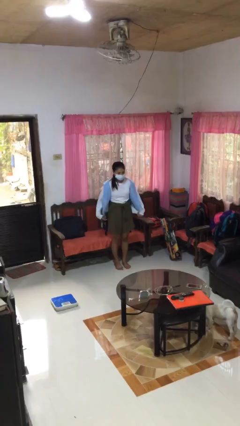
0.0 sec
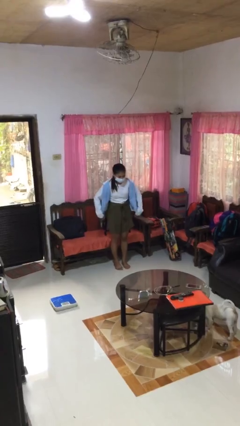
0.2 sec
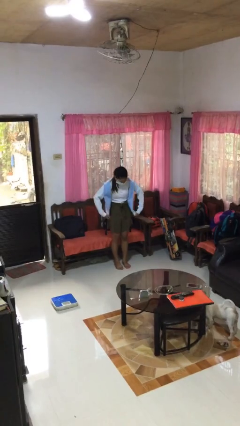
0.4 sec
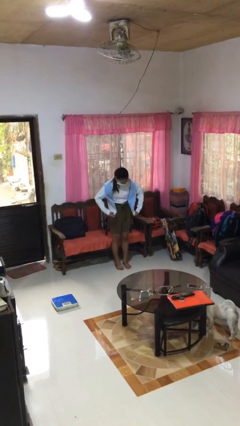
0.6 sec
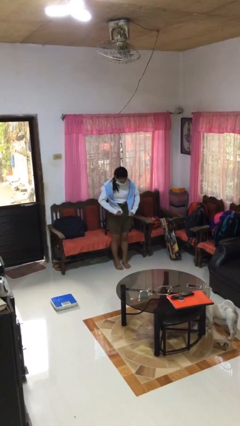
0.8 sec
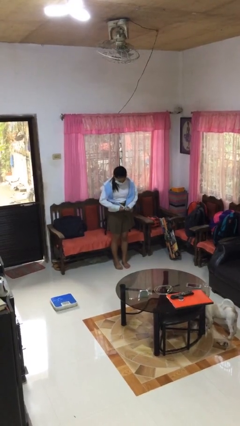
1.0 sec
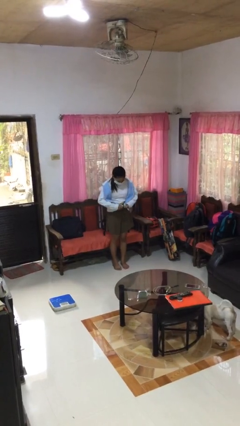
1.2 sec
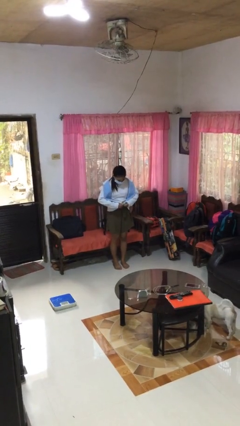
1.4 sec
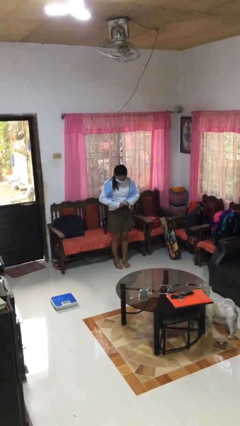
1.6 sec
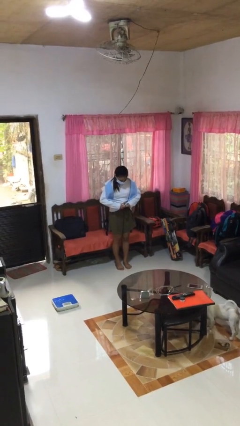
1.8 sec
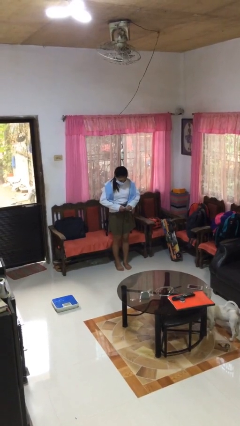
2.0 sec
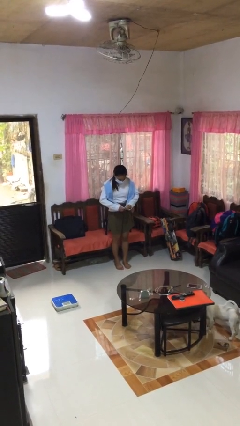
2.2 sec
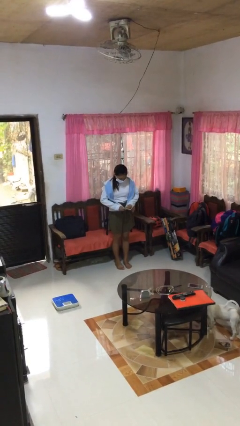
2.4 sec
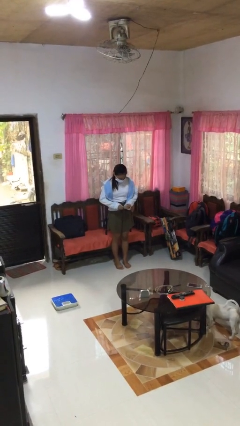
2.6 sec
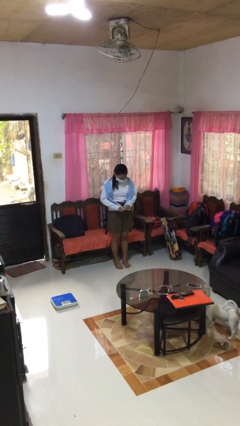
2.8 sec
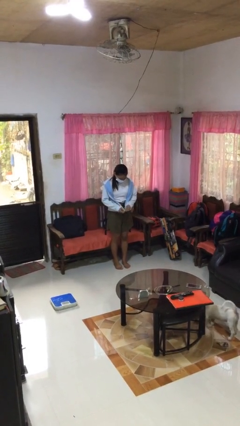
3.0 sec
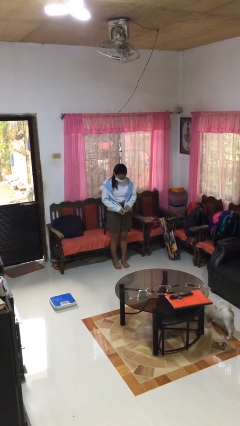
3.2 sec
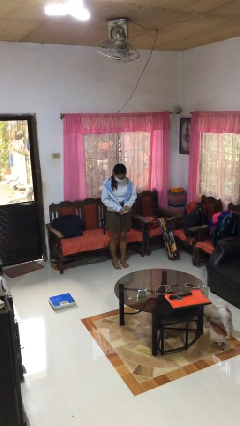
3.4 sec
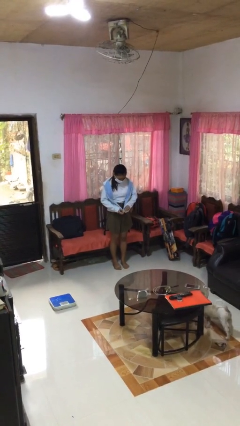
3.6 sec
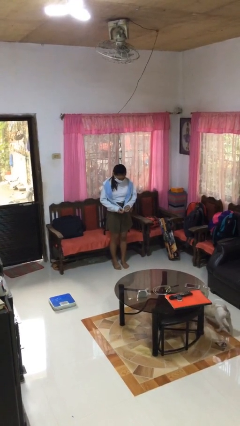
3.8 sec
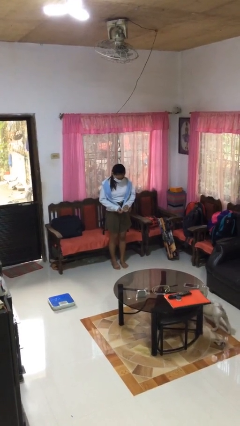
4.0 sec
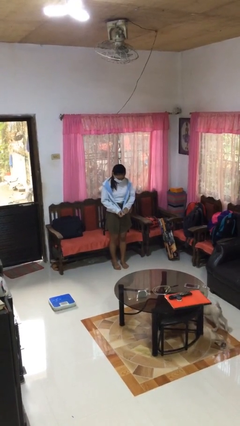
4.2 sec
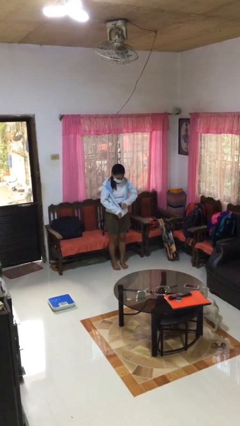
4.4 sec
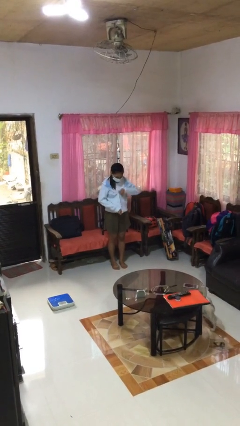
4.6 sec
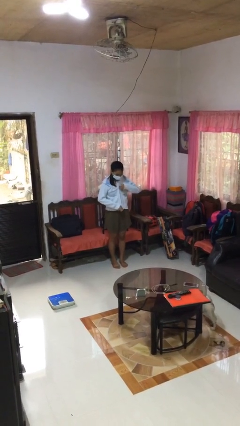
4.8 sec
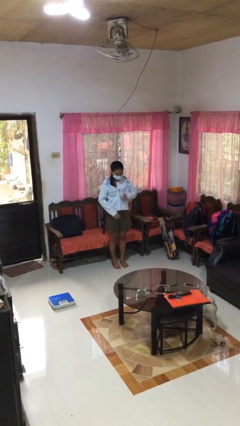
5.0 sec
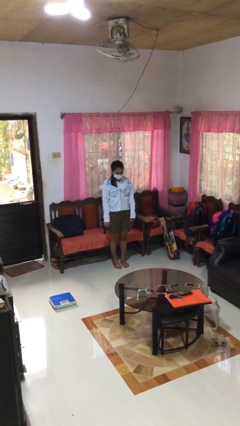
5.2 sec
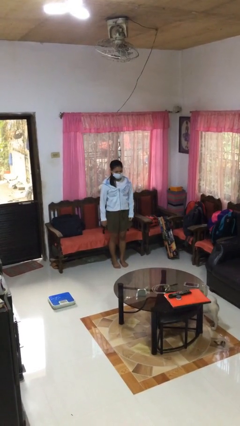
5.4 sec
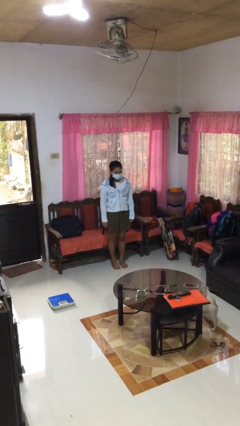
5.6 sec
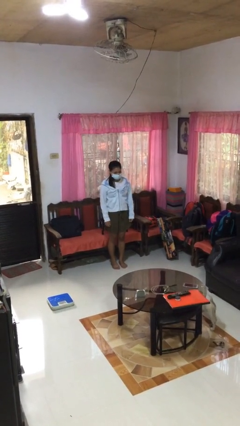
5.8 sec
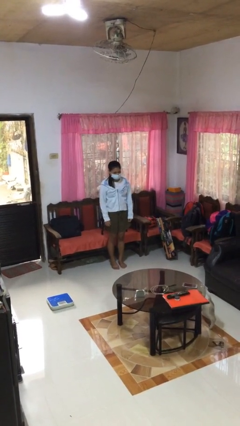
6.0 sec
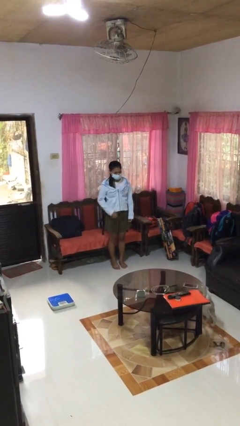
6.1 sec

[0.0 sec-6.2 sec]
person zips up jacket

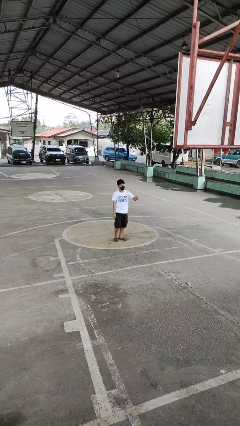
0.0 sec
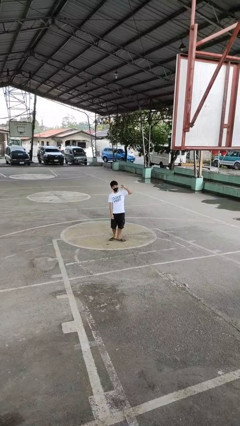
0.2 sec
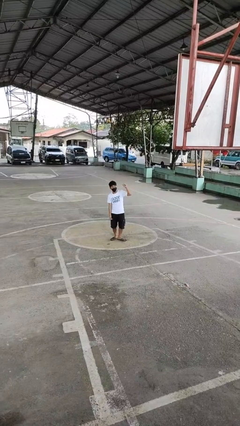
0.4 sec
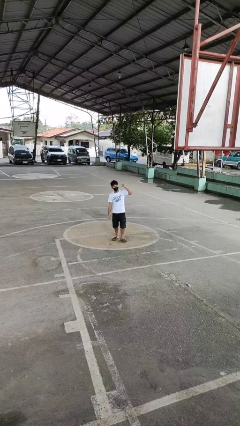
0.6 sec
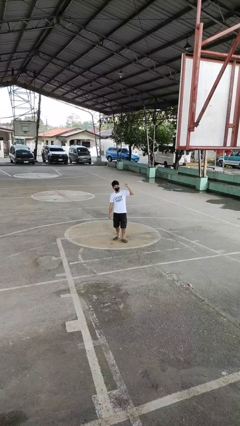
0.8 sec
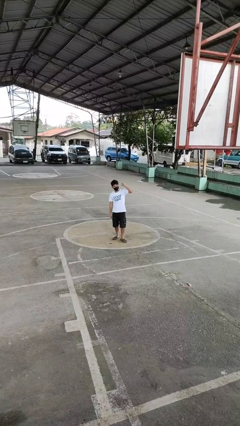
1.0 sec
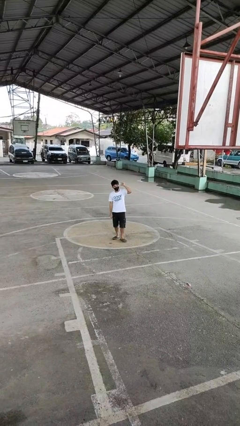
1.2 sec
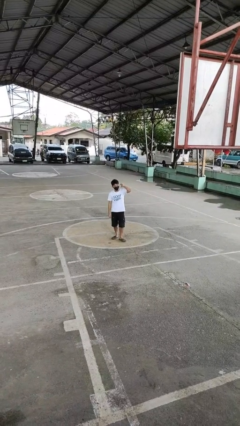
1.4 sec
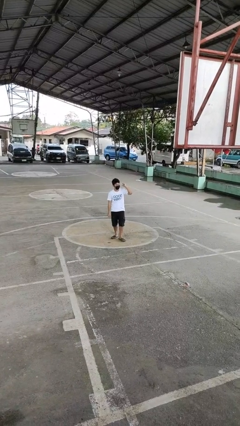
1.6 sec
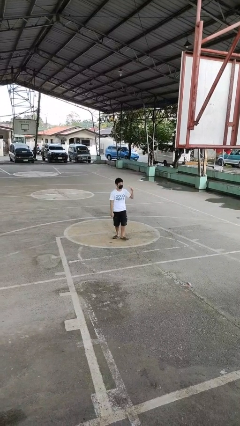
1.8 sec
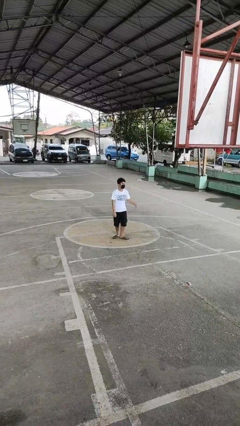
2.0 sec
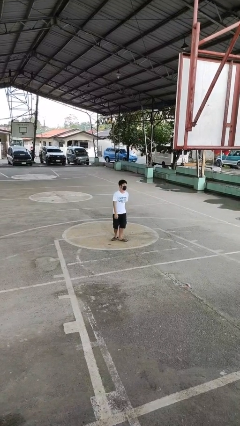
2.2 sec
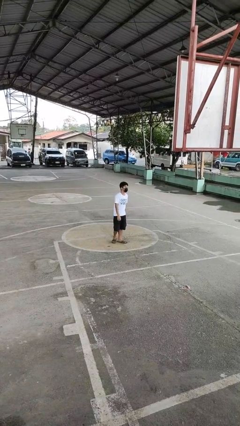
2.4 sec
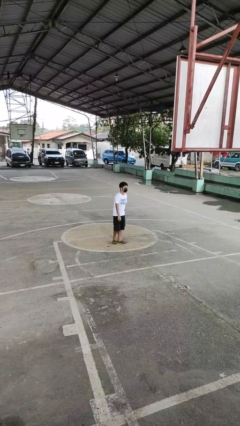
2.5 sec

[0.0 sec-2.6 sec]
person gestures behind me

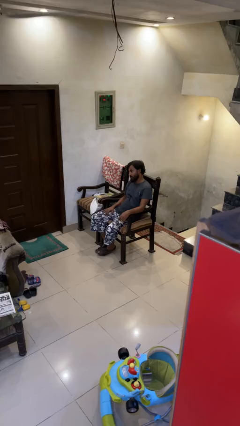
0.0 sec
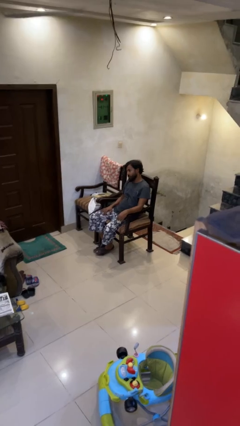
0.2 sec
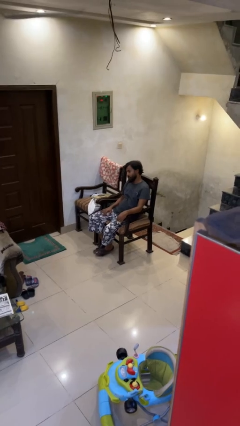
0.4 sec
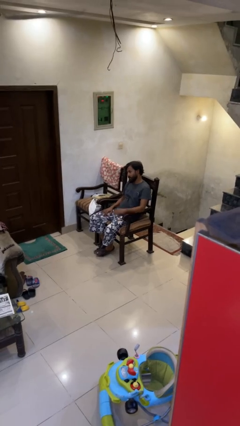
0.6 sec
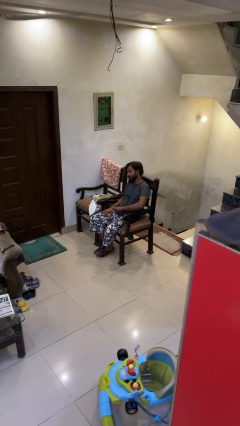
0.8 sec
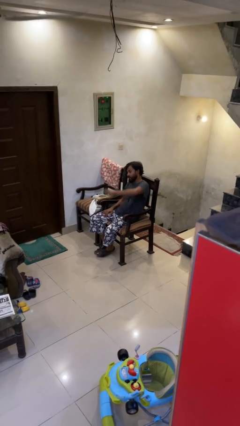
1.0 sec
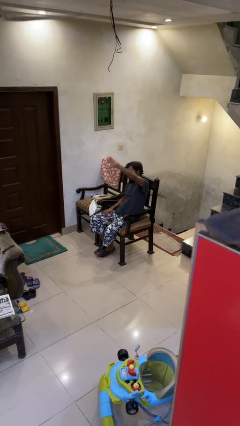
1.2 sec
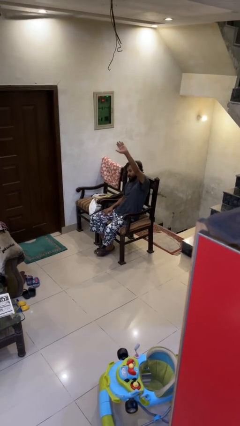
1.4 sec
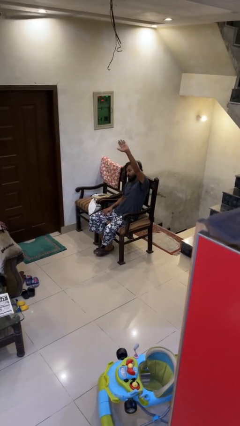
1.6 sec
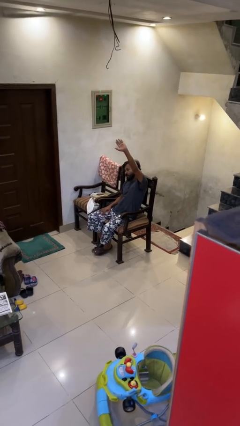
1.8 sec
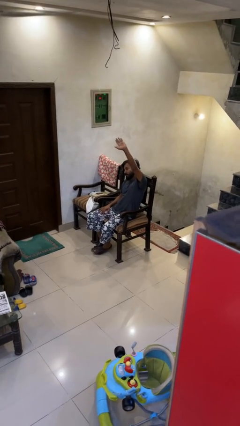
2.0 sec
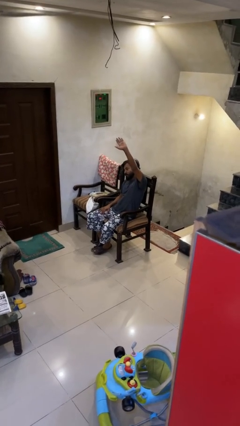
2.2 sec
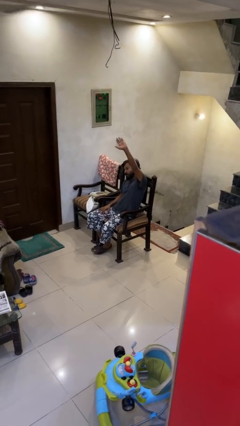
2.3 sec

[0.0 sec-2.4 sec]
person gestures swipe up

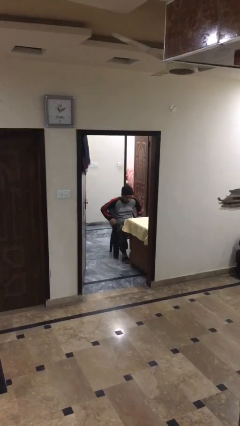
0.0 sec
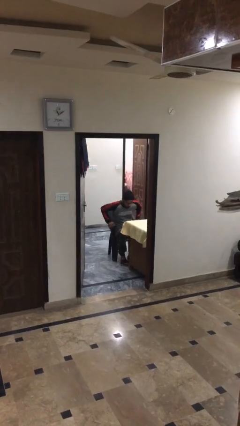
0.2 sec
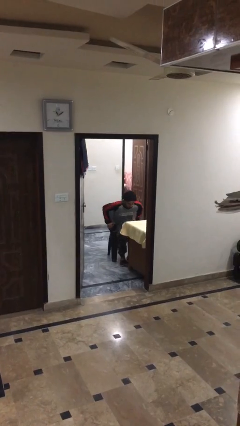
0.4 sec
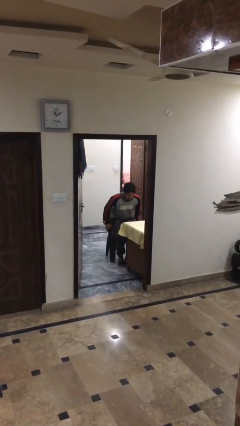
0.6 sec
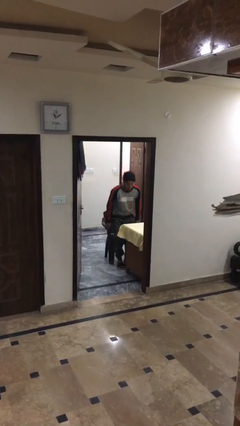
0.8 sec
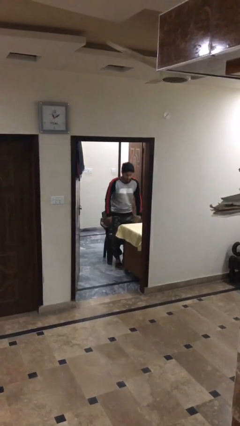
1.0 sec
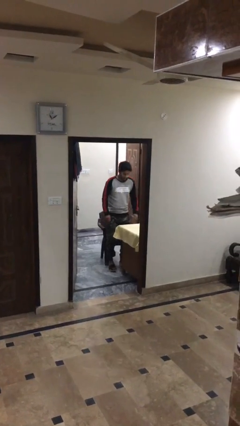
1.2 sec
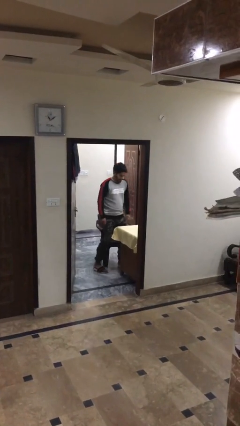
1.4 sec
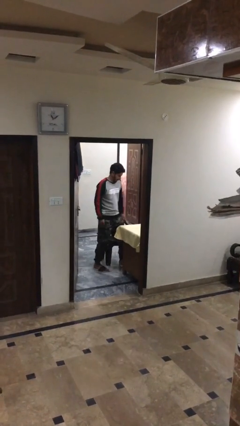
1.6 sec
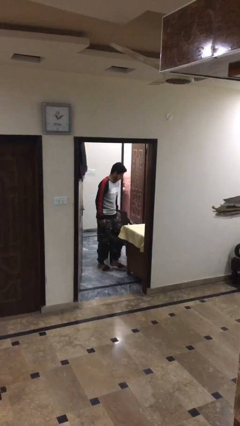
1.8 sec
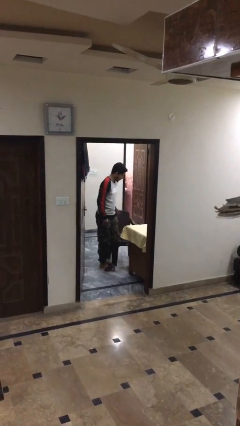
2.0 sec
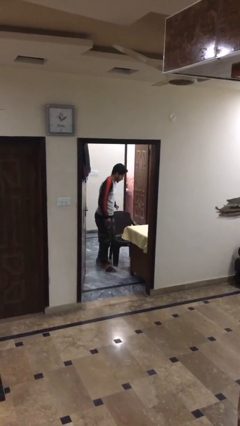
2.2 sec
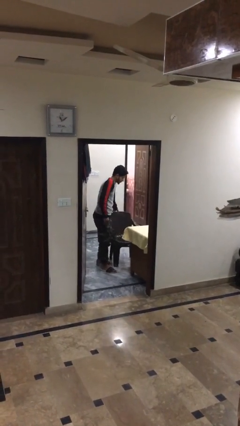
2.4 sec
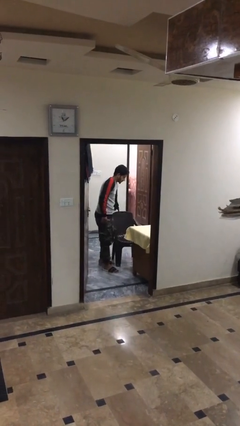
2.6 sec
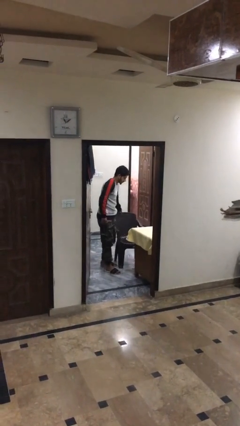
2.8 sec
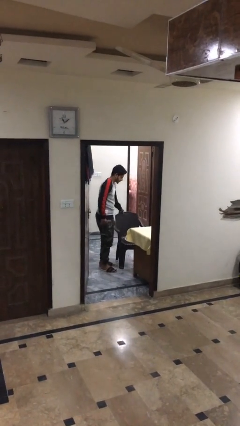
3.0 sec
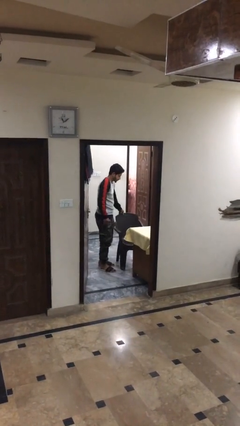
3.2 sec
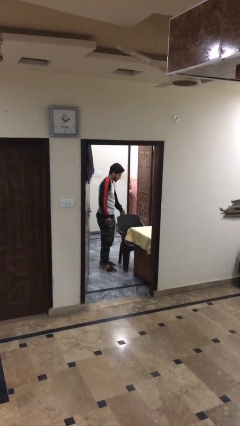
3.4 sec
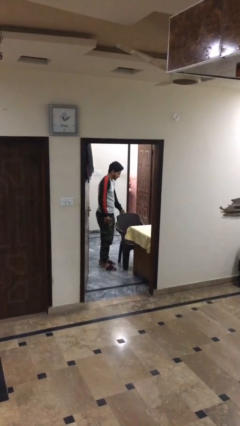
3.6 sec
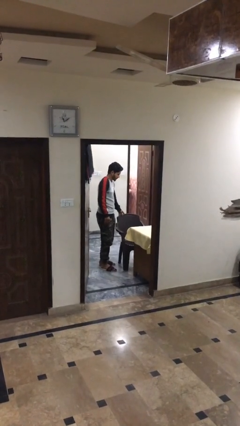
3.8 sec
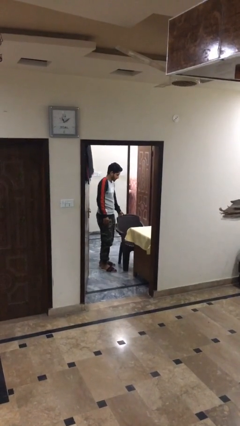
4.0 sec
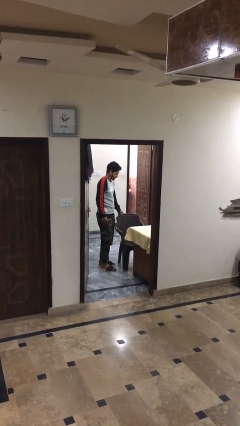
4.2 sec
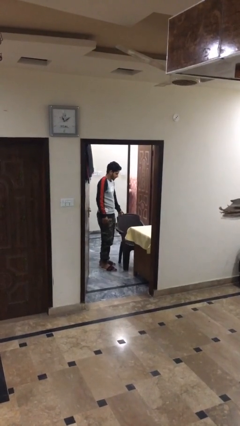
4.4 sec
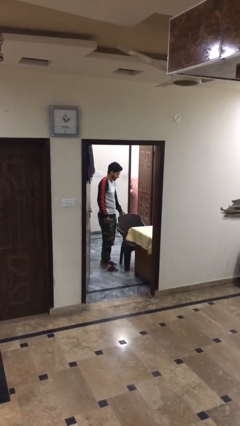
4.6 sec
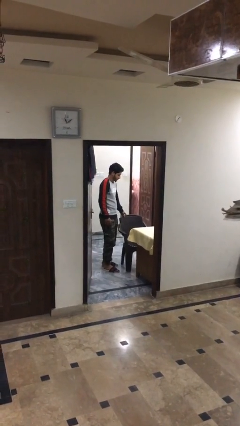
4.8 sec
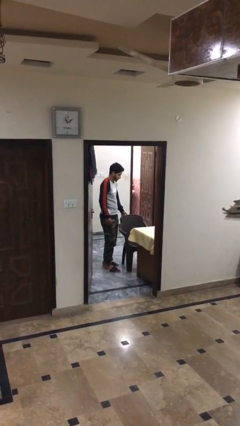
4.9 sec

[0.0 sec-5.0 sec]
person stands up

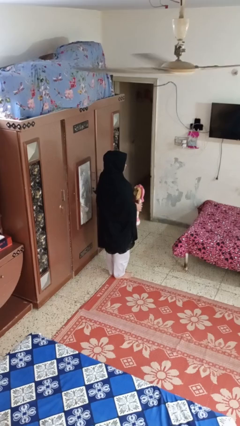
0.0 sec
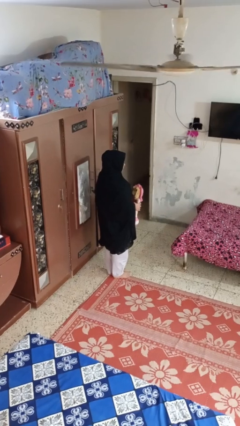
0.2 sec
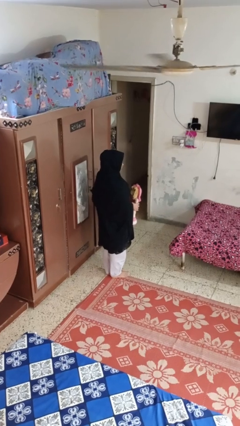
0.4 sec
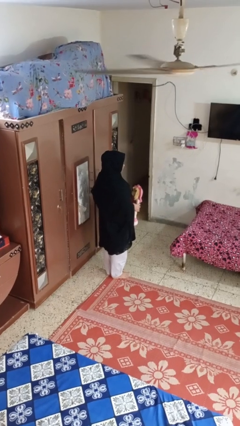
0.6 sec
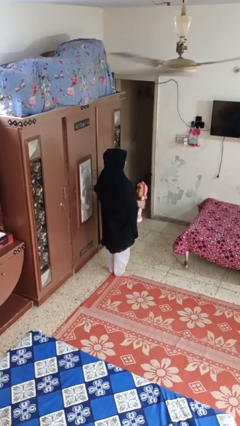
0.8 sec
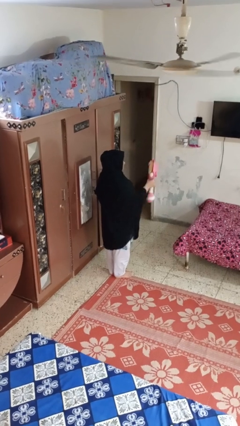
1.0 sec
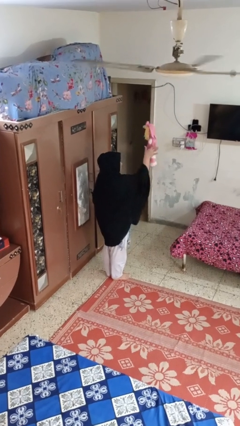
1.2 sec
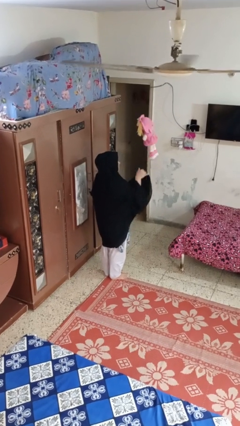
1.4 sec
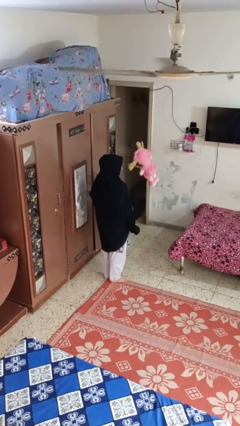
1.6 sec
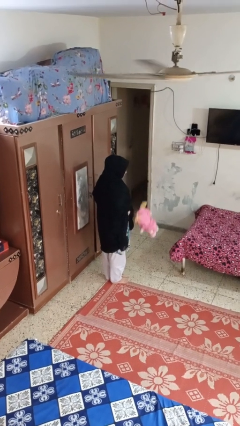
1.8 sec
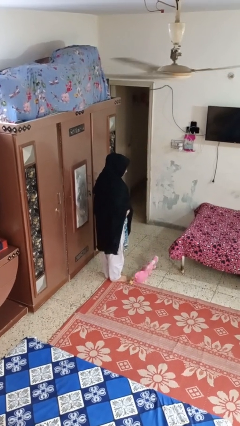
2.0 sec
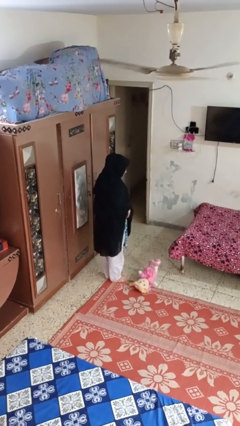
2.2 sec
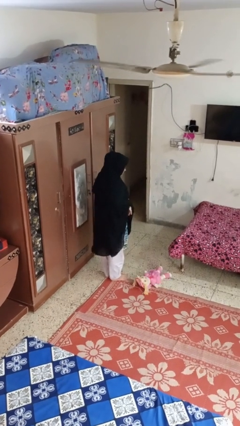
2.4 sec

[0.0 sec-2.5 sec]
person throws object into air
